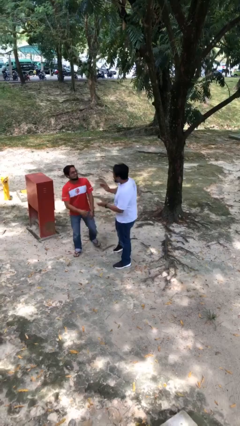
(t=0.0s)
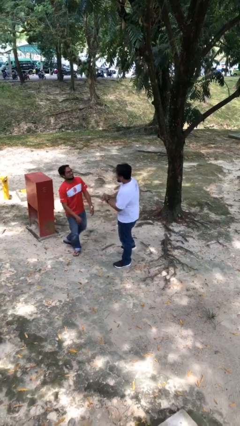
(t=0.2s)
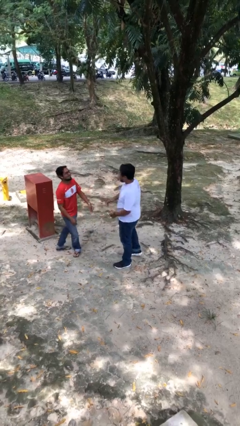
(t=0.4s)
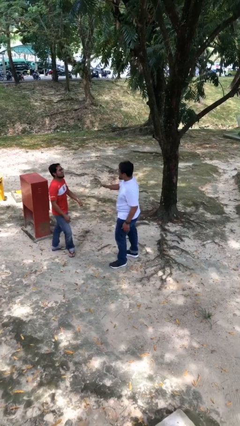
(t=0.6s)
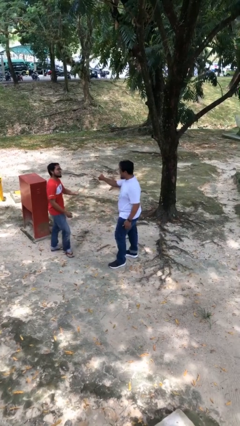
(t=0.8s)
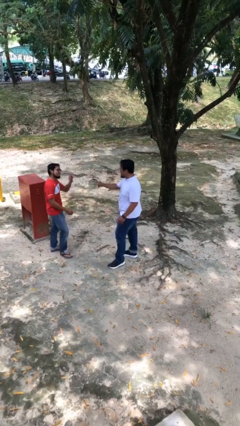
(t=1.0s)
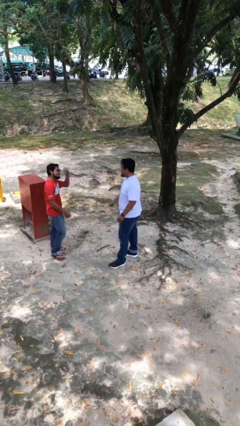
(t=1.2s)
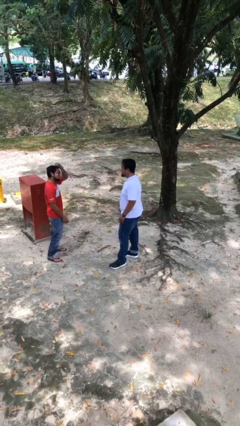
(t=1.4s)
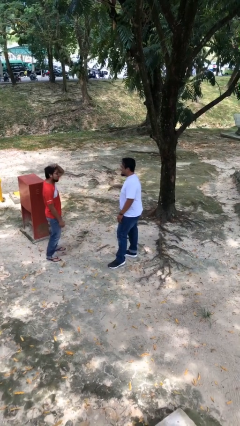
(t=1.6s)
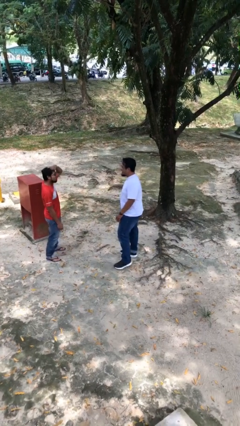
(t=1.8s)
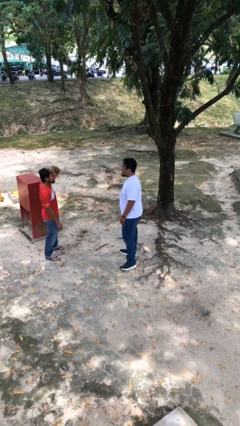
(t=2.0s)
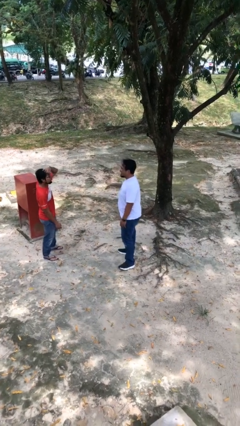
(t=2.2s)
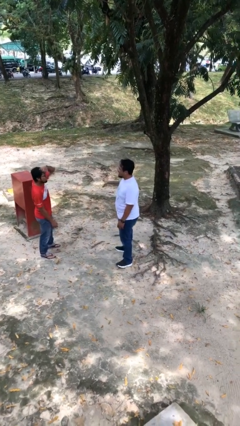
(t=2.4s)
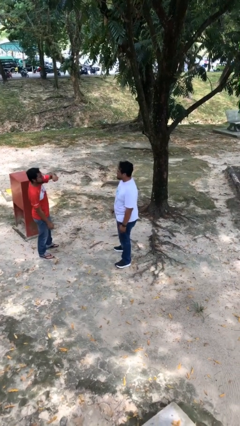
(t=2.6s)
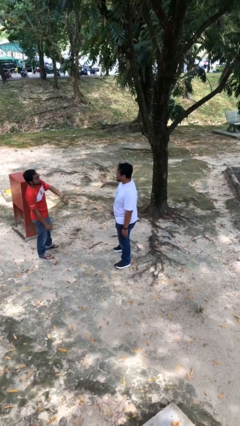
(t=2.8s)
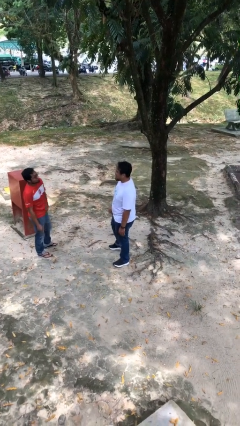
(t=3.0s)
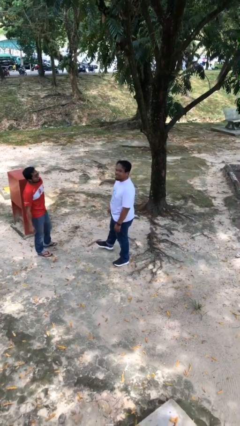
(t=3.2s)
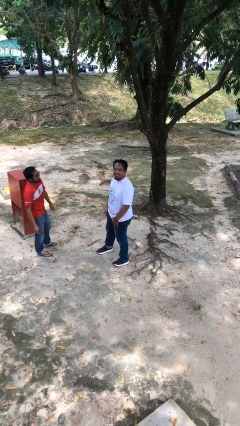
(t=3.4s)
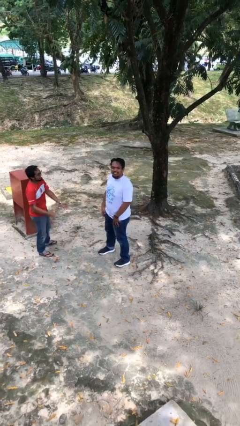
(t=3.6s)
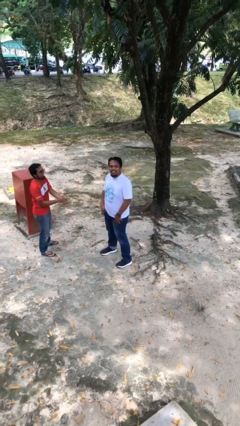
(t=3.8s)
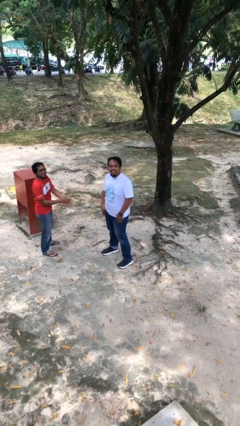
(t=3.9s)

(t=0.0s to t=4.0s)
person talks to person

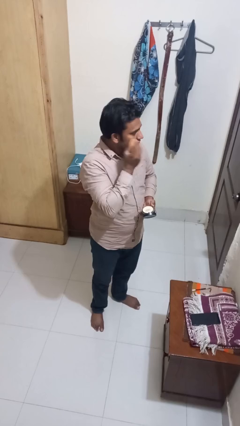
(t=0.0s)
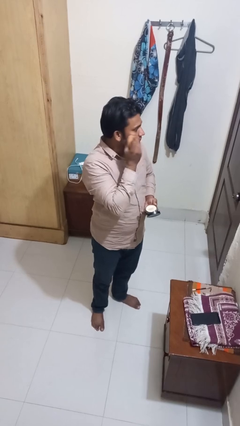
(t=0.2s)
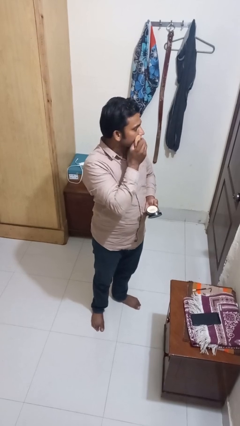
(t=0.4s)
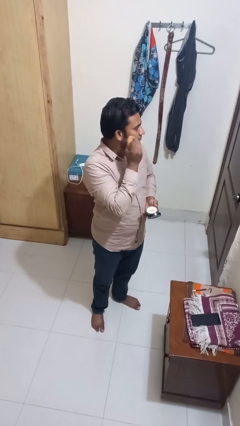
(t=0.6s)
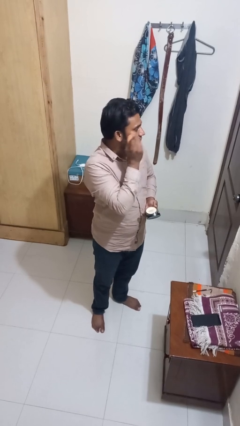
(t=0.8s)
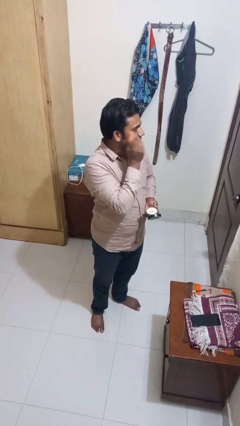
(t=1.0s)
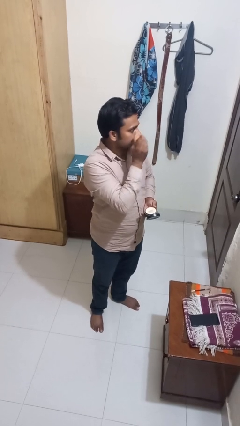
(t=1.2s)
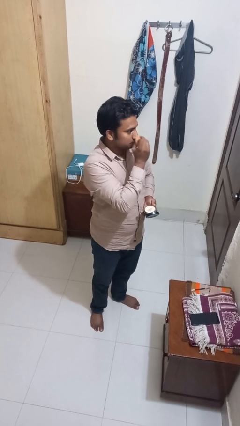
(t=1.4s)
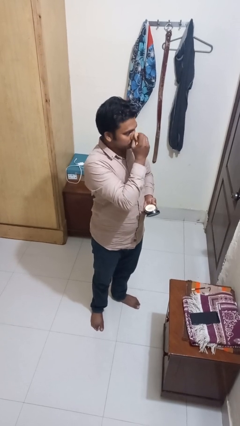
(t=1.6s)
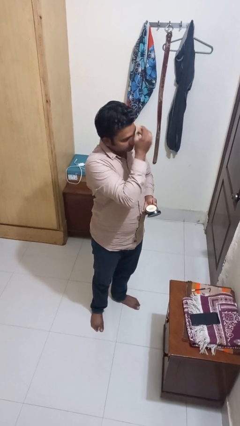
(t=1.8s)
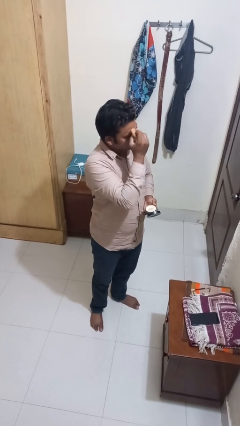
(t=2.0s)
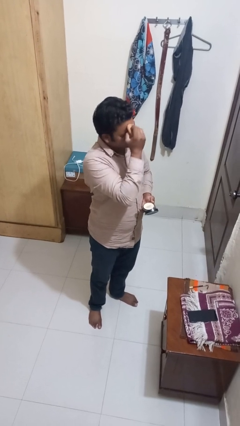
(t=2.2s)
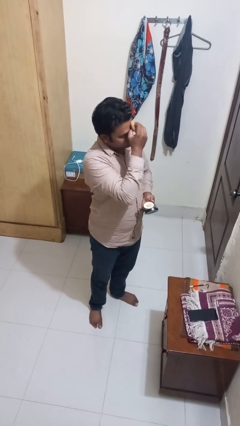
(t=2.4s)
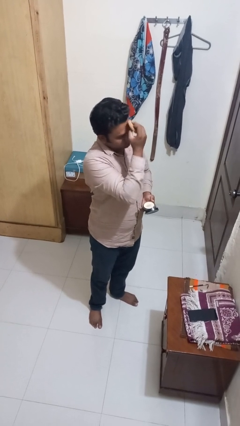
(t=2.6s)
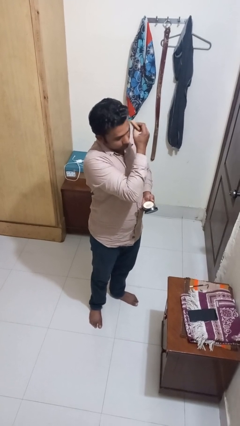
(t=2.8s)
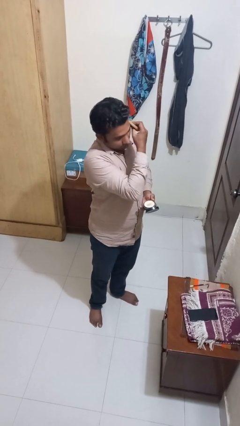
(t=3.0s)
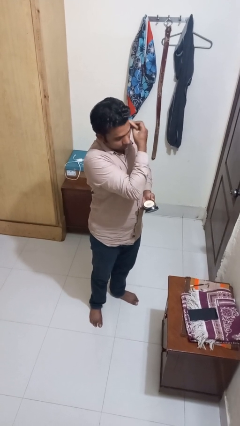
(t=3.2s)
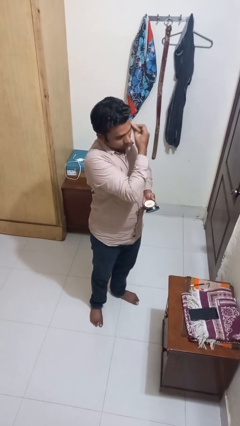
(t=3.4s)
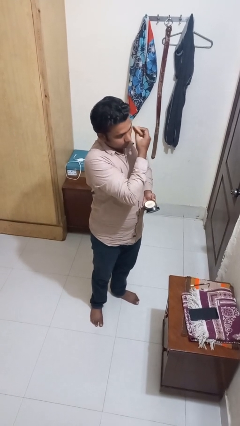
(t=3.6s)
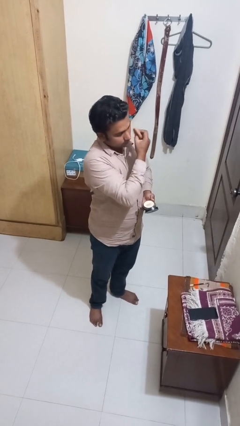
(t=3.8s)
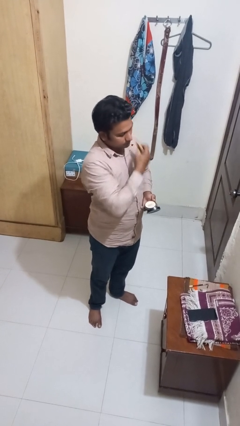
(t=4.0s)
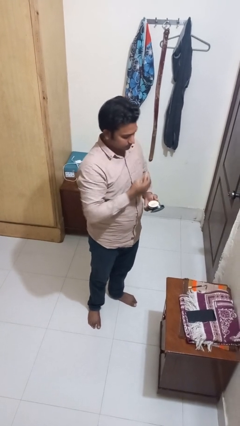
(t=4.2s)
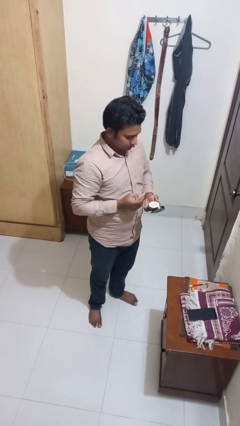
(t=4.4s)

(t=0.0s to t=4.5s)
person applies foundation makeup

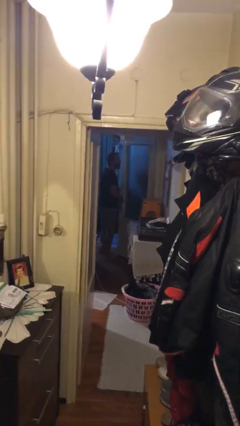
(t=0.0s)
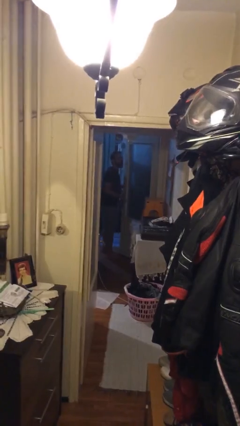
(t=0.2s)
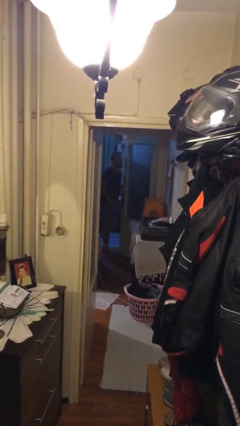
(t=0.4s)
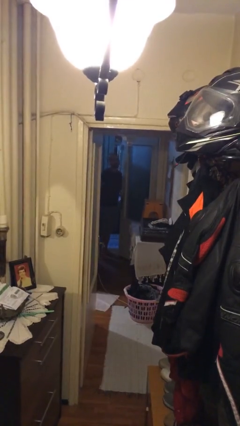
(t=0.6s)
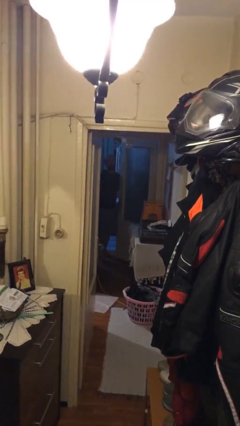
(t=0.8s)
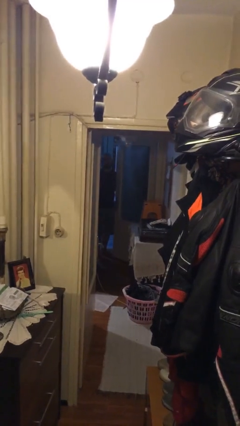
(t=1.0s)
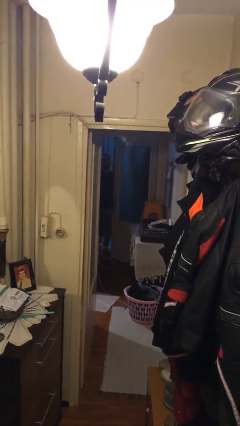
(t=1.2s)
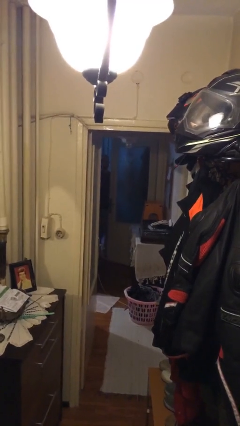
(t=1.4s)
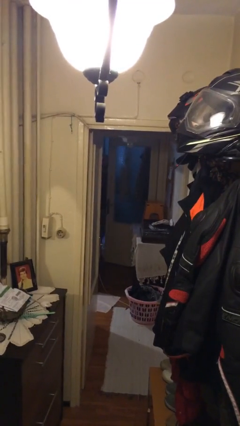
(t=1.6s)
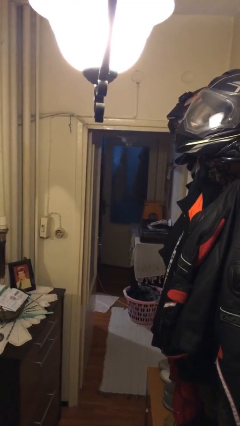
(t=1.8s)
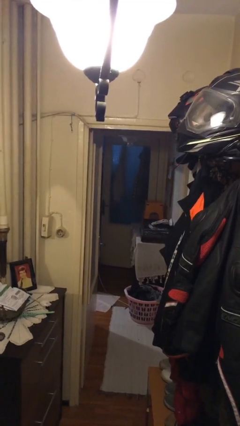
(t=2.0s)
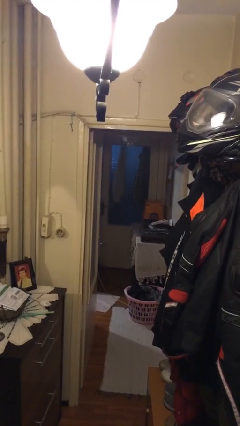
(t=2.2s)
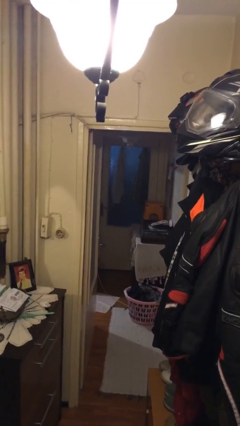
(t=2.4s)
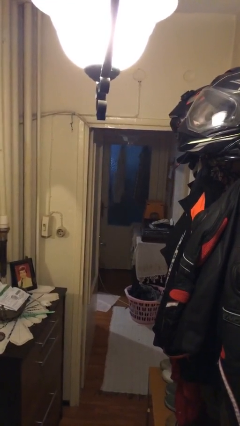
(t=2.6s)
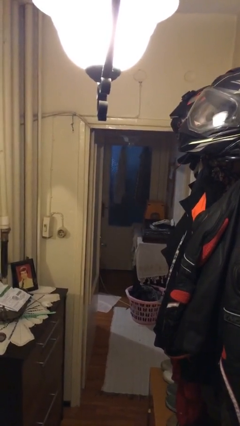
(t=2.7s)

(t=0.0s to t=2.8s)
person closes facility door

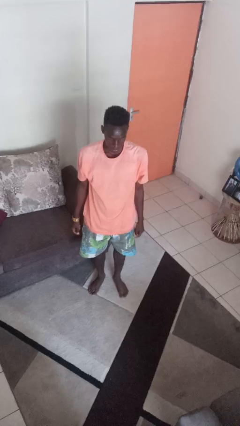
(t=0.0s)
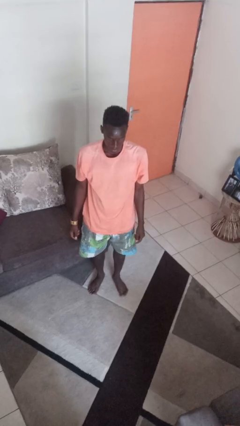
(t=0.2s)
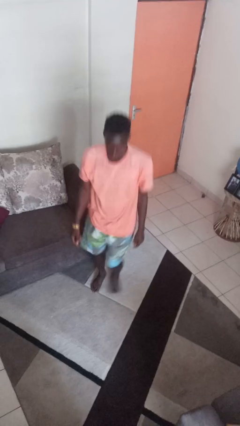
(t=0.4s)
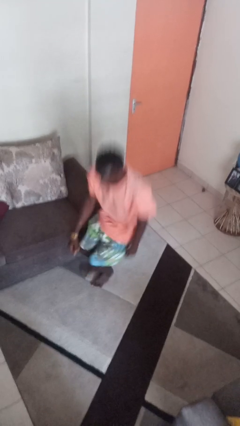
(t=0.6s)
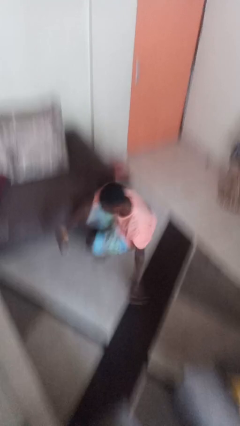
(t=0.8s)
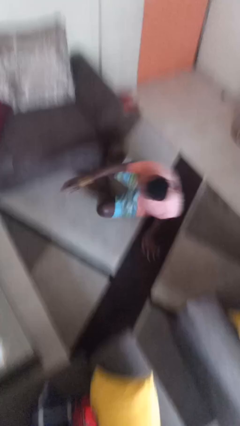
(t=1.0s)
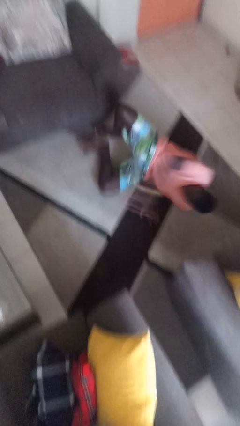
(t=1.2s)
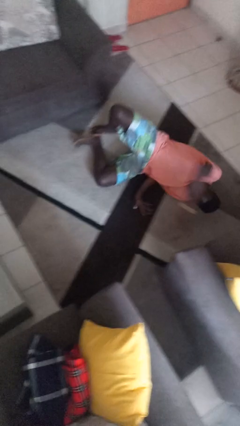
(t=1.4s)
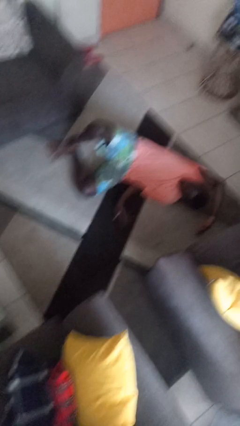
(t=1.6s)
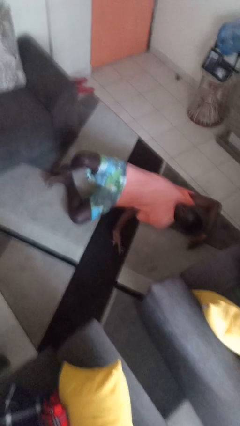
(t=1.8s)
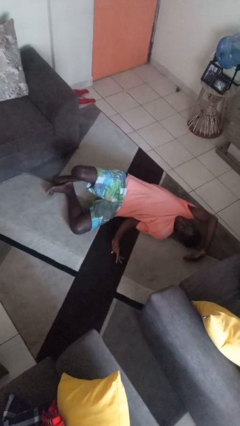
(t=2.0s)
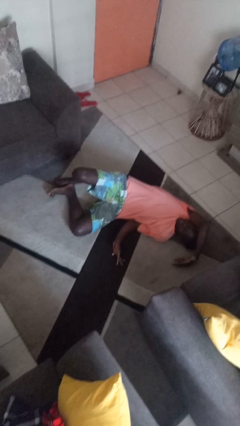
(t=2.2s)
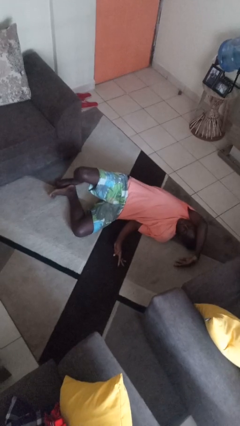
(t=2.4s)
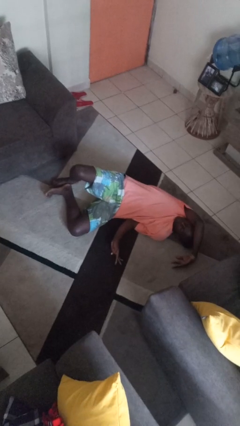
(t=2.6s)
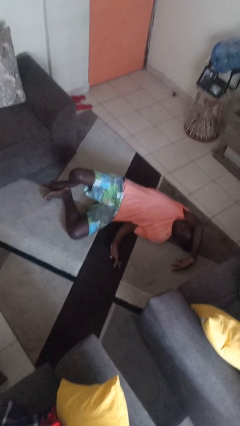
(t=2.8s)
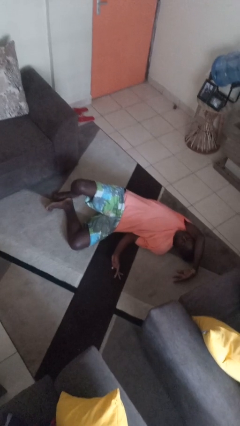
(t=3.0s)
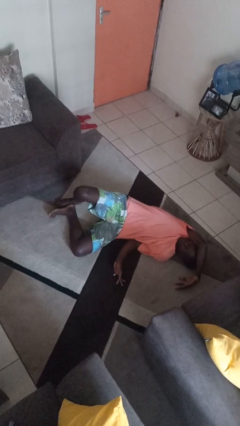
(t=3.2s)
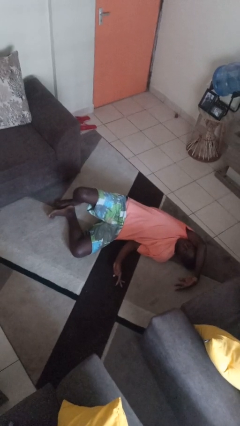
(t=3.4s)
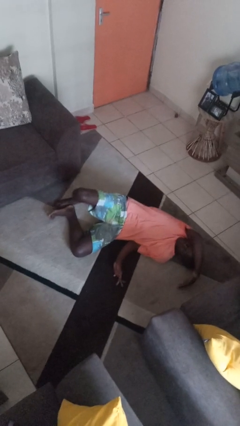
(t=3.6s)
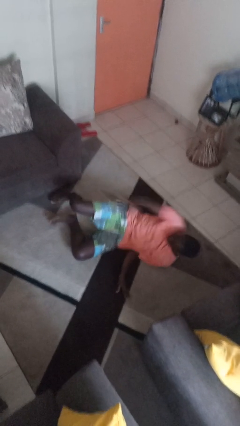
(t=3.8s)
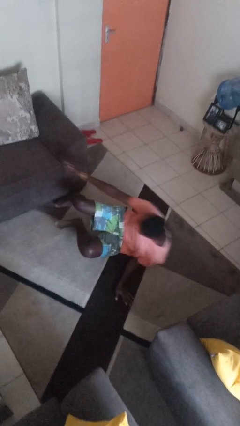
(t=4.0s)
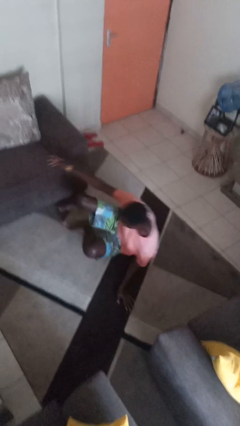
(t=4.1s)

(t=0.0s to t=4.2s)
person falls while standing

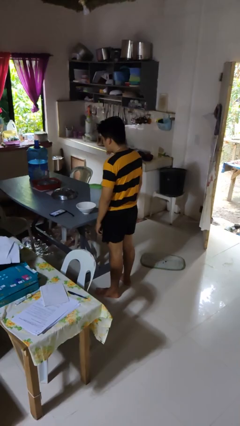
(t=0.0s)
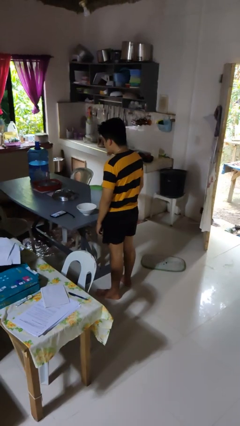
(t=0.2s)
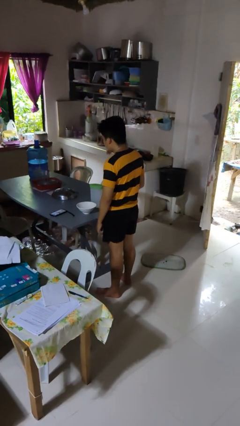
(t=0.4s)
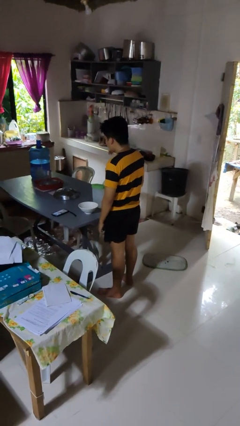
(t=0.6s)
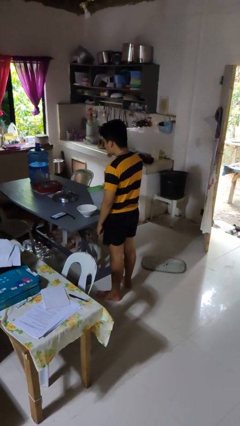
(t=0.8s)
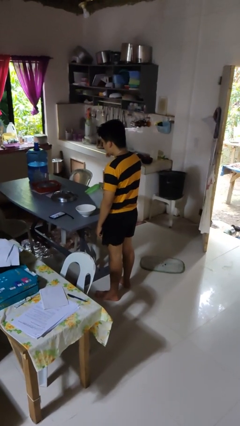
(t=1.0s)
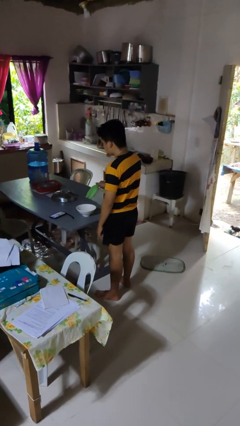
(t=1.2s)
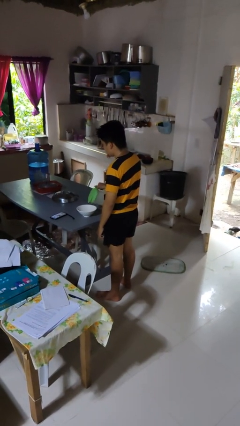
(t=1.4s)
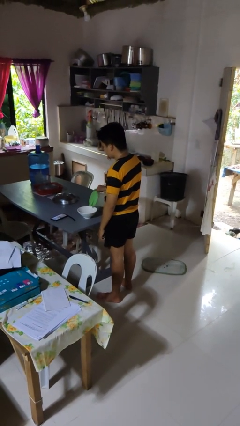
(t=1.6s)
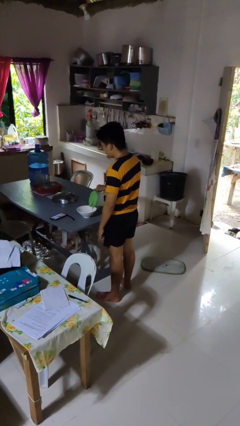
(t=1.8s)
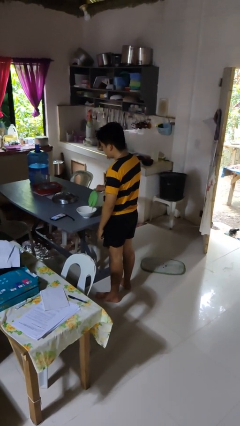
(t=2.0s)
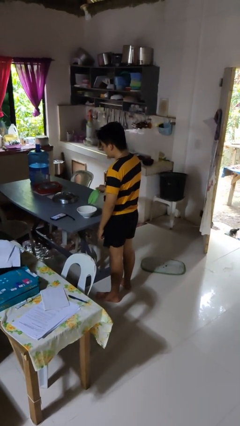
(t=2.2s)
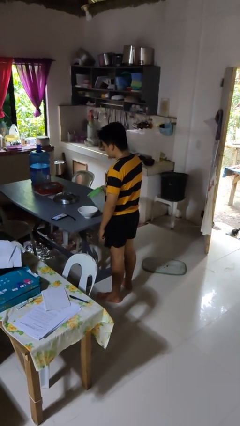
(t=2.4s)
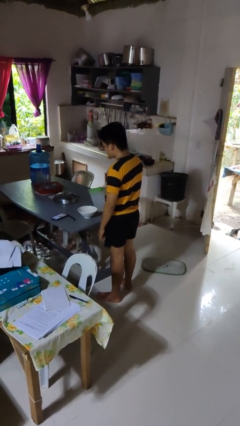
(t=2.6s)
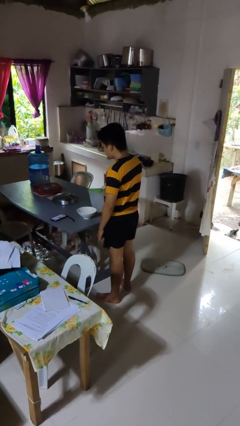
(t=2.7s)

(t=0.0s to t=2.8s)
person pours into bowl
